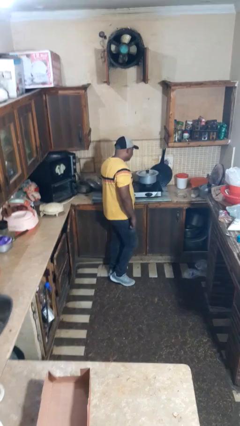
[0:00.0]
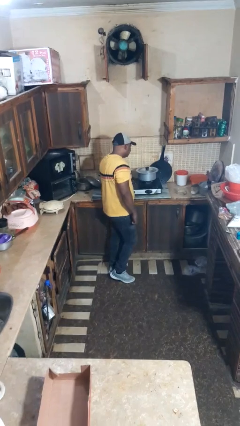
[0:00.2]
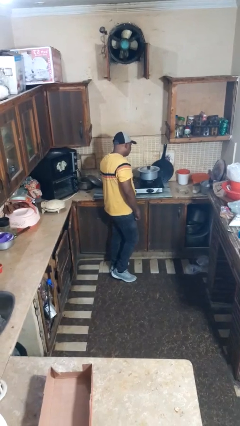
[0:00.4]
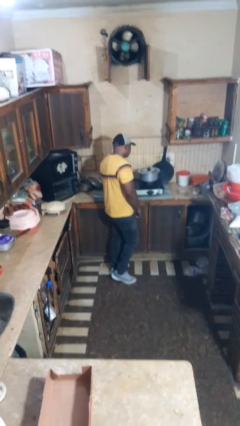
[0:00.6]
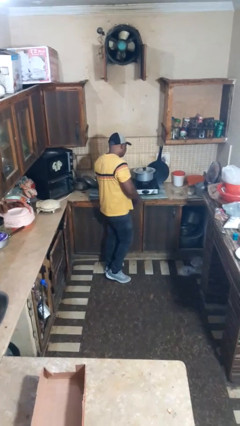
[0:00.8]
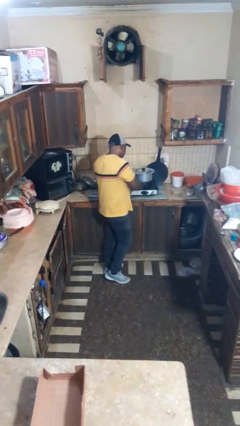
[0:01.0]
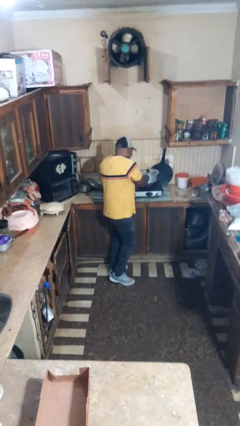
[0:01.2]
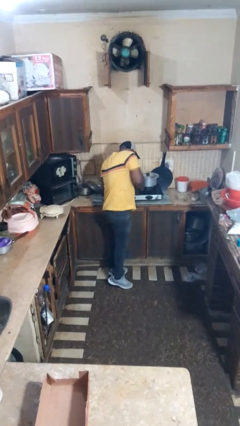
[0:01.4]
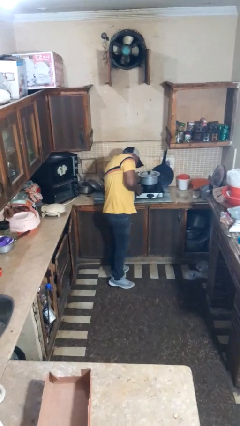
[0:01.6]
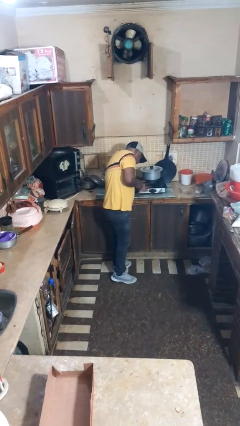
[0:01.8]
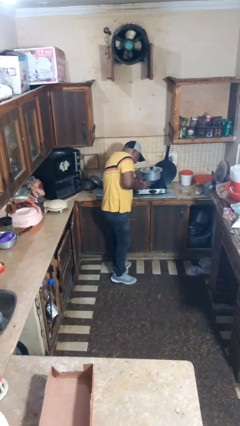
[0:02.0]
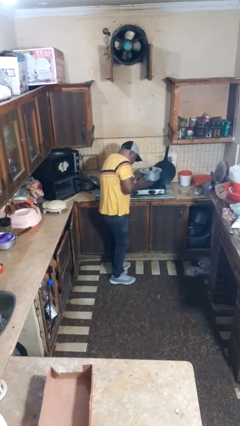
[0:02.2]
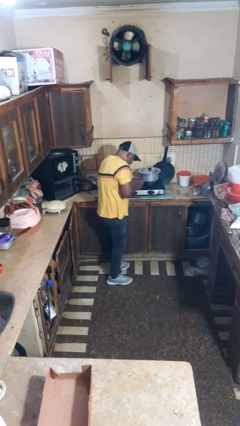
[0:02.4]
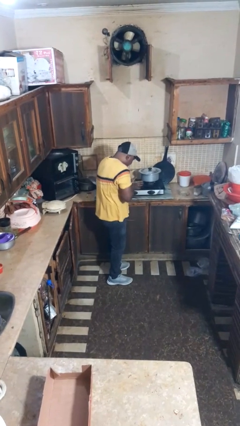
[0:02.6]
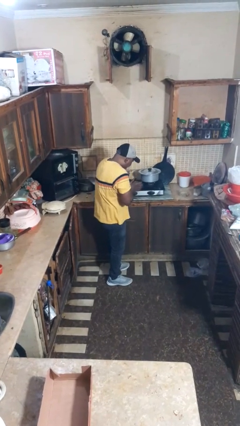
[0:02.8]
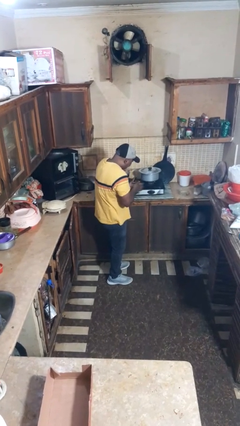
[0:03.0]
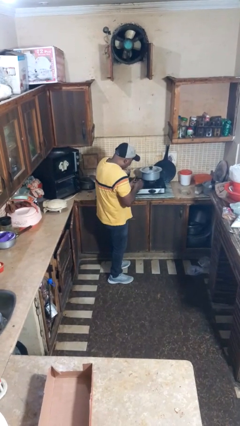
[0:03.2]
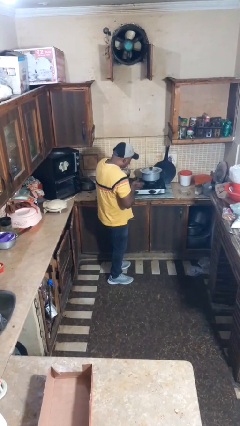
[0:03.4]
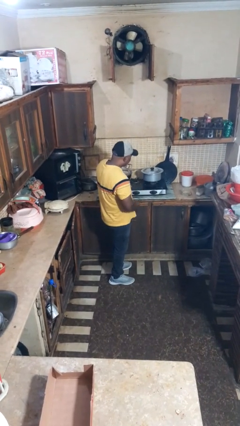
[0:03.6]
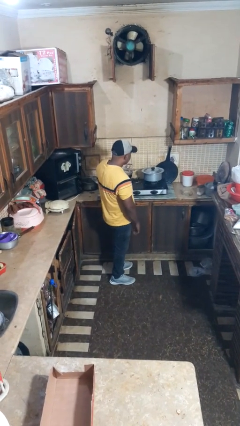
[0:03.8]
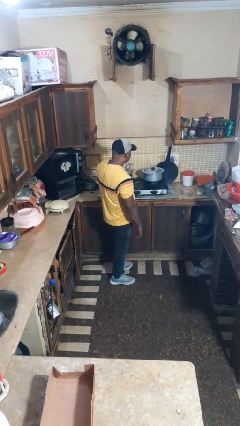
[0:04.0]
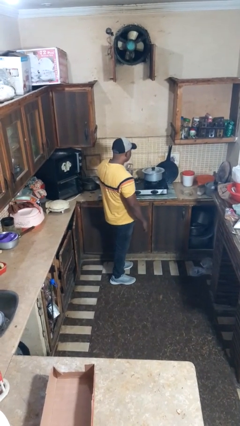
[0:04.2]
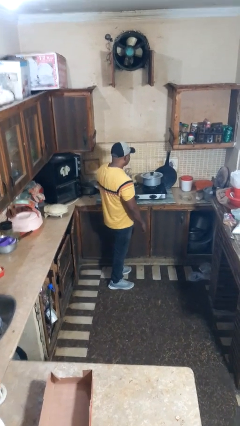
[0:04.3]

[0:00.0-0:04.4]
person burns hand

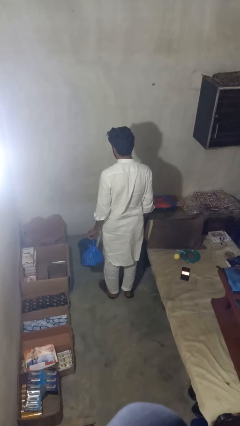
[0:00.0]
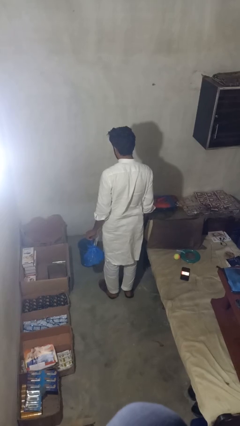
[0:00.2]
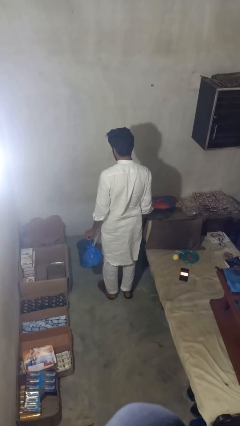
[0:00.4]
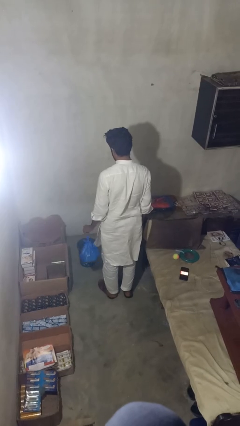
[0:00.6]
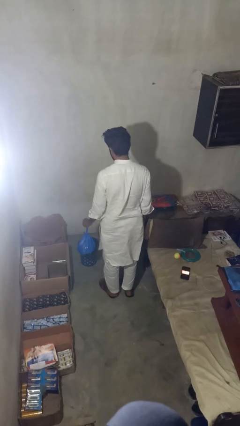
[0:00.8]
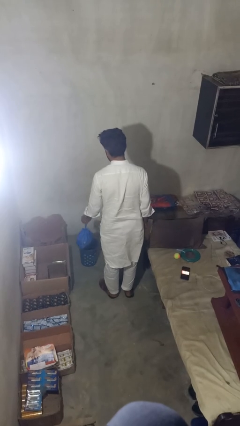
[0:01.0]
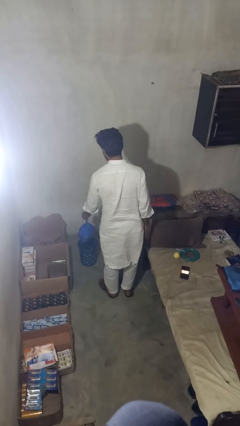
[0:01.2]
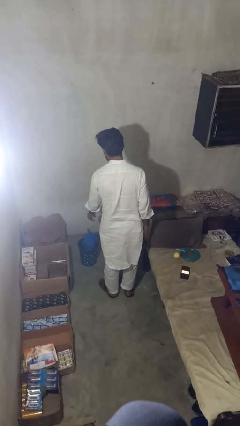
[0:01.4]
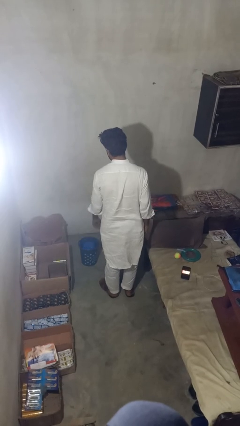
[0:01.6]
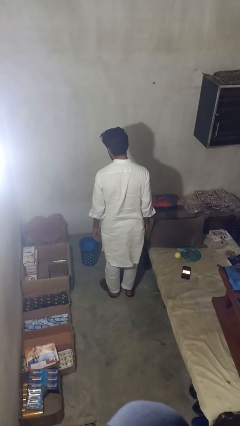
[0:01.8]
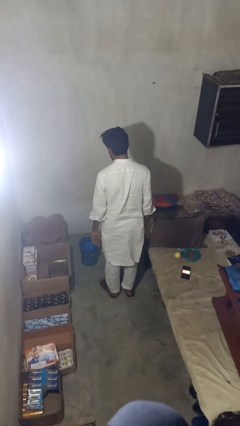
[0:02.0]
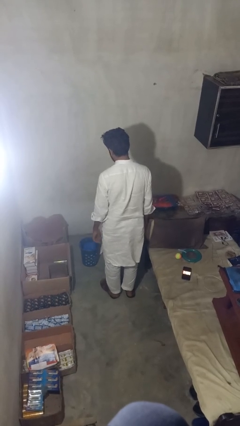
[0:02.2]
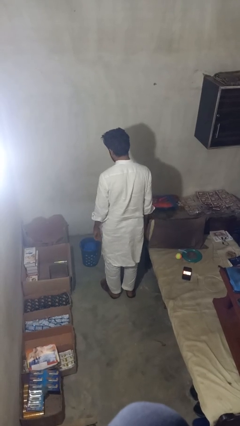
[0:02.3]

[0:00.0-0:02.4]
person puts object into basket

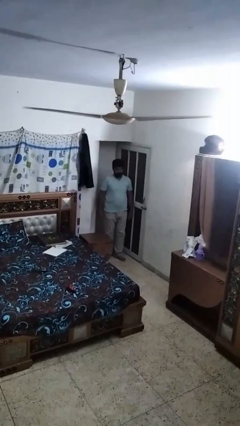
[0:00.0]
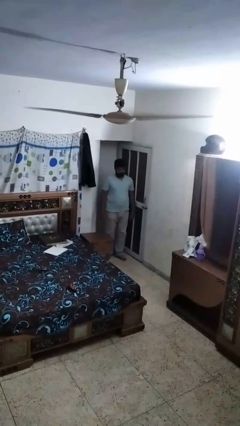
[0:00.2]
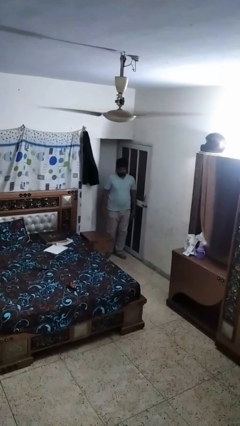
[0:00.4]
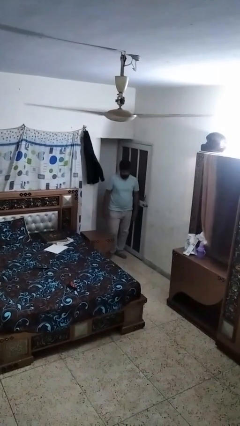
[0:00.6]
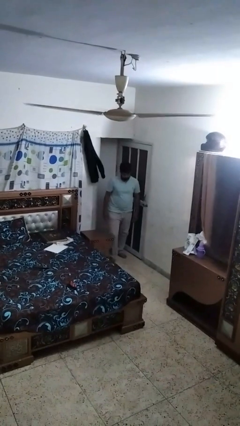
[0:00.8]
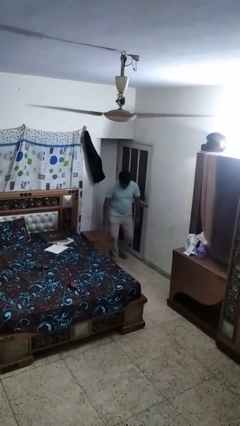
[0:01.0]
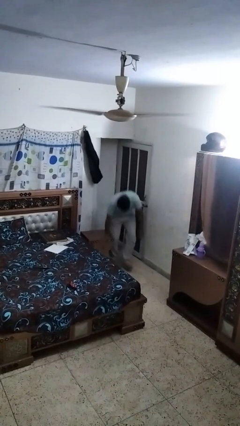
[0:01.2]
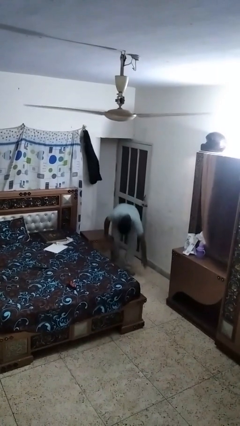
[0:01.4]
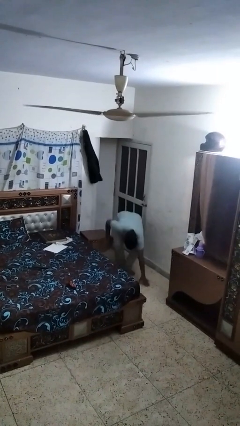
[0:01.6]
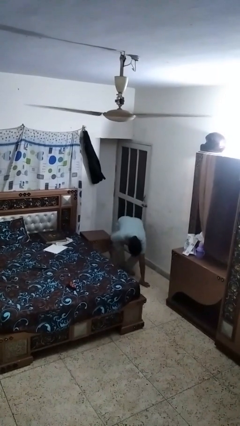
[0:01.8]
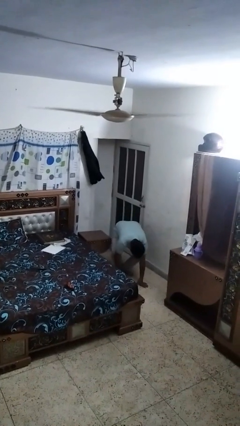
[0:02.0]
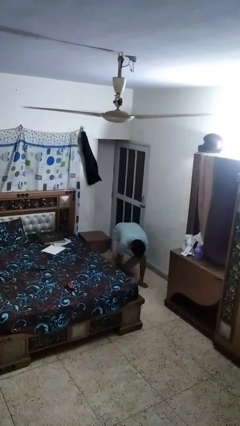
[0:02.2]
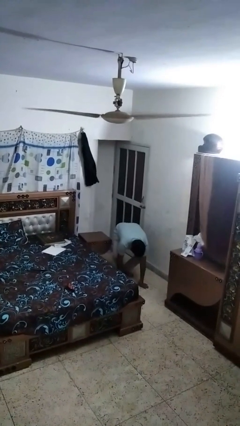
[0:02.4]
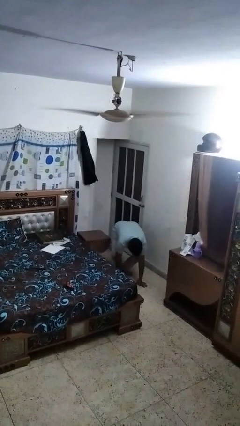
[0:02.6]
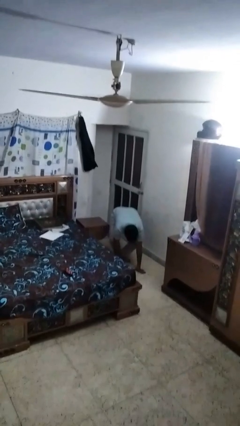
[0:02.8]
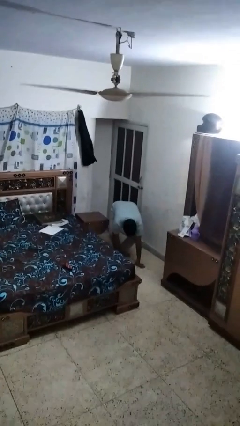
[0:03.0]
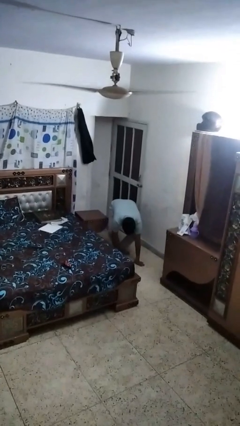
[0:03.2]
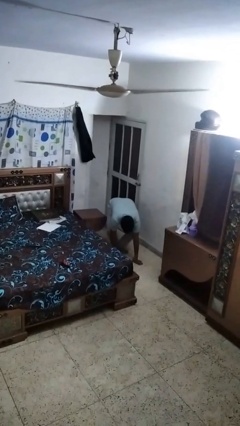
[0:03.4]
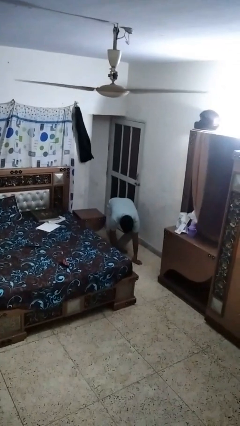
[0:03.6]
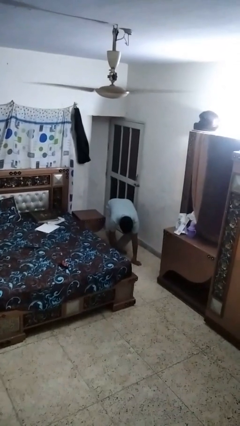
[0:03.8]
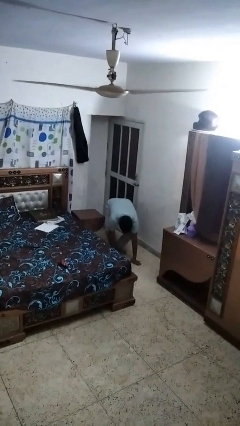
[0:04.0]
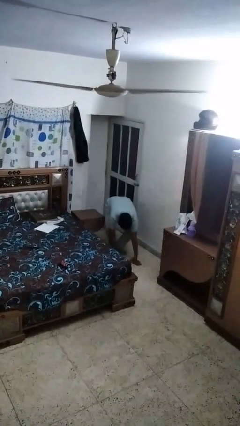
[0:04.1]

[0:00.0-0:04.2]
person trips on object on floor

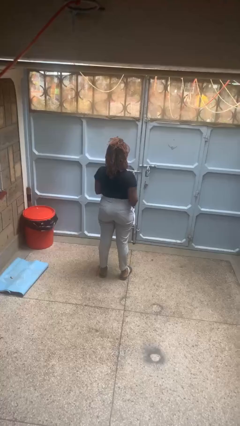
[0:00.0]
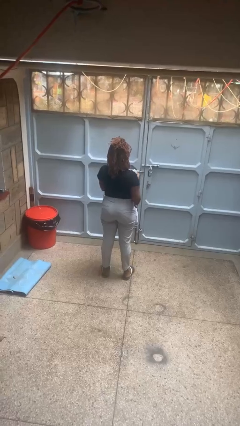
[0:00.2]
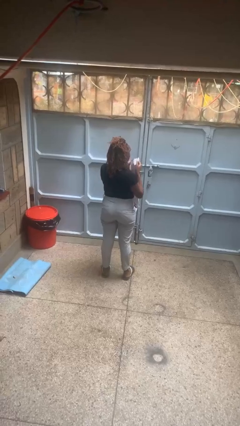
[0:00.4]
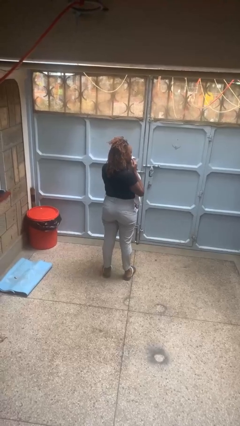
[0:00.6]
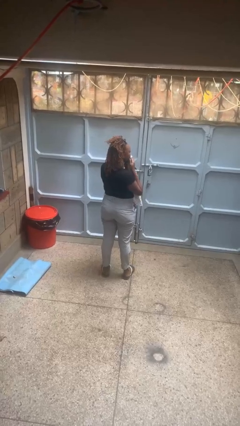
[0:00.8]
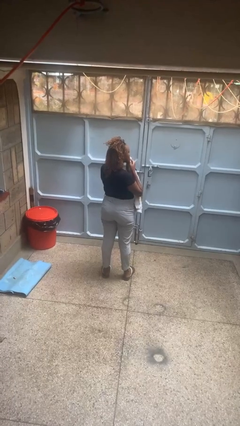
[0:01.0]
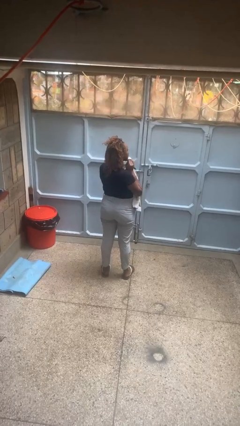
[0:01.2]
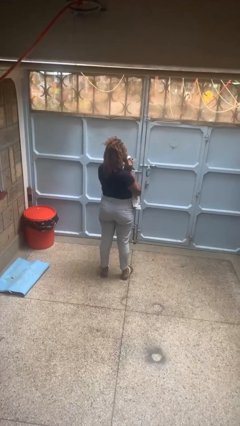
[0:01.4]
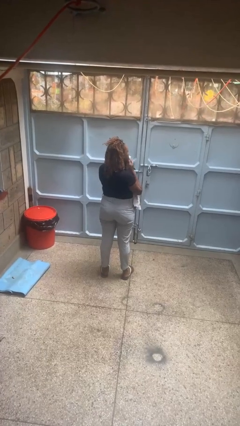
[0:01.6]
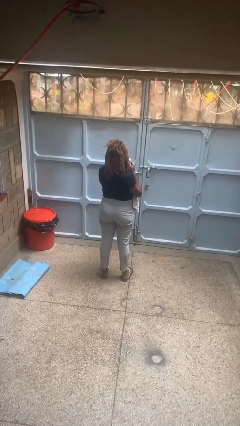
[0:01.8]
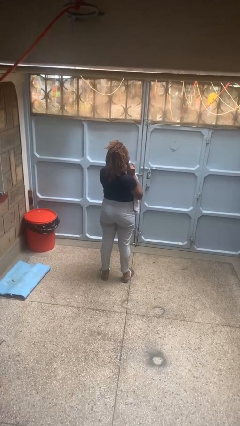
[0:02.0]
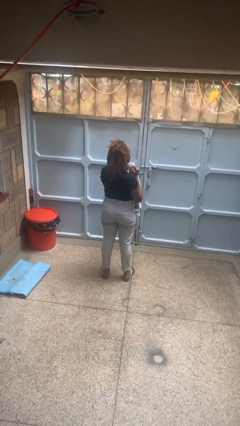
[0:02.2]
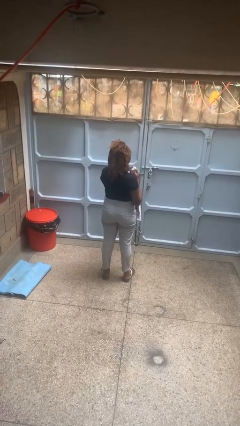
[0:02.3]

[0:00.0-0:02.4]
person wipes mouth with napkin

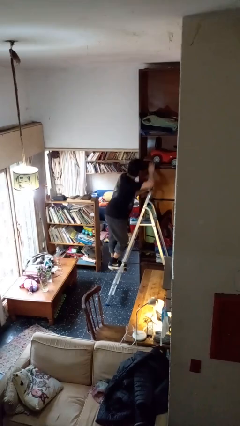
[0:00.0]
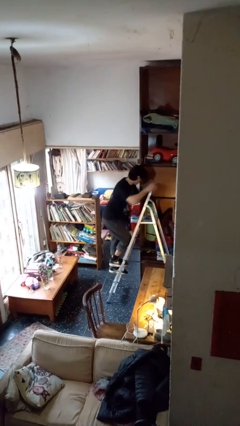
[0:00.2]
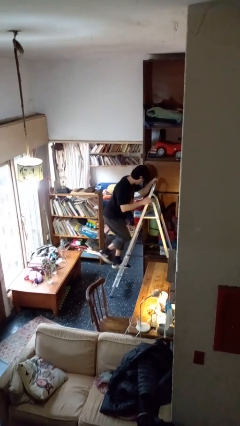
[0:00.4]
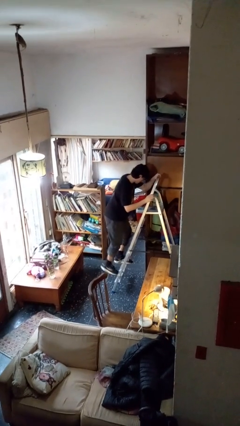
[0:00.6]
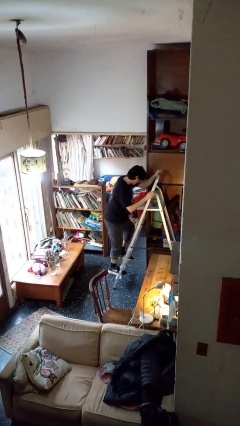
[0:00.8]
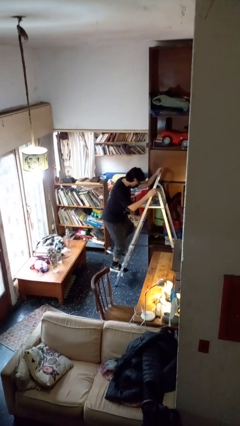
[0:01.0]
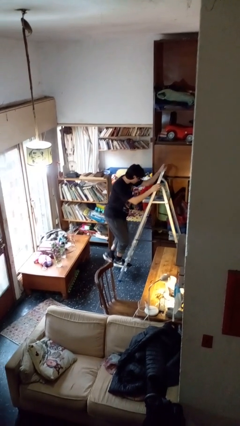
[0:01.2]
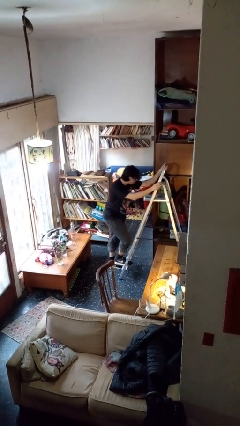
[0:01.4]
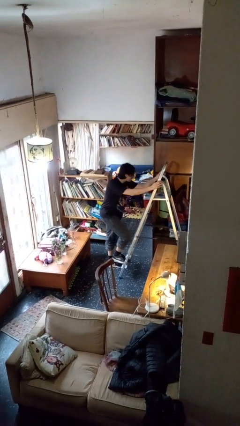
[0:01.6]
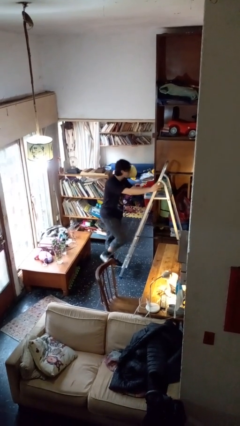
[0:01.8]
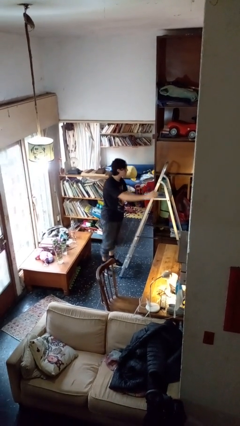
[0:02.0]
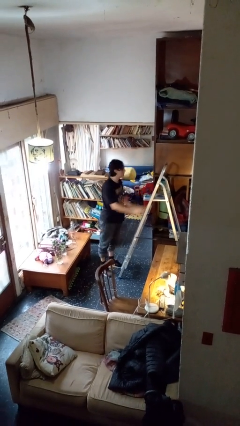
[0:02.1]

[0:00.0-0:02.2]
person climbs down ladder

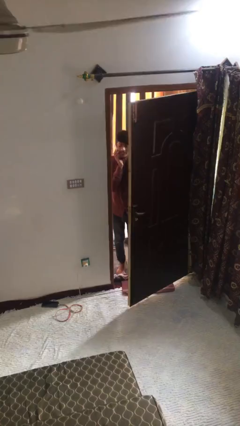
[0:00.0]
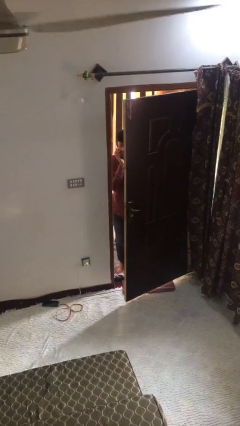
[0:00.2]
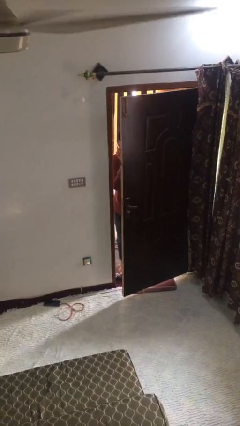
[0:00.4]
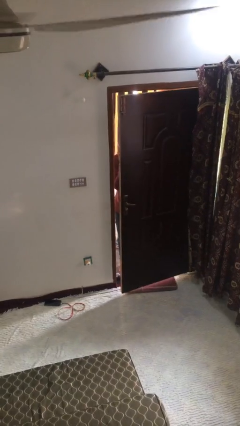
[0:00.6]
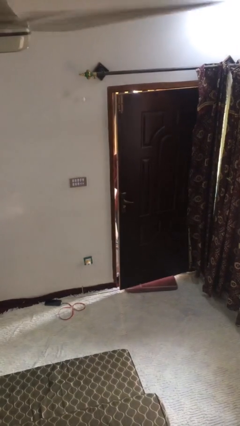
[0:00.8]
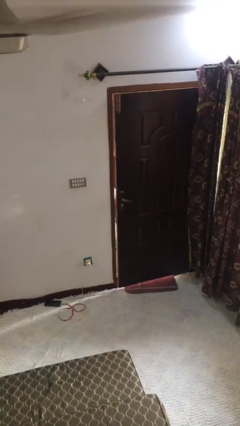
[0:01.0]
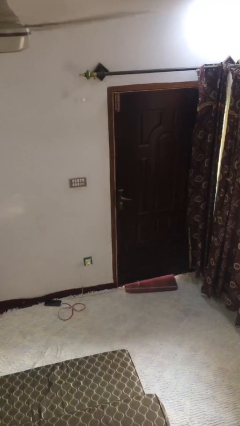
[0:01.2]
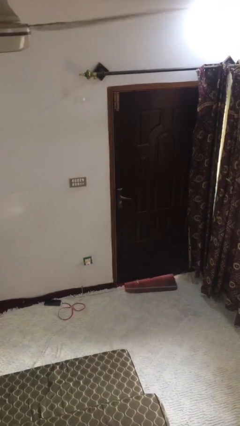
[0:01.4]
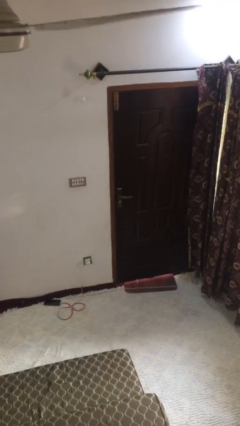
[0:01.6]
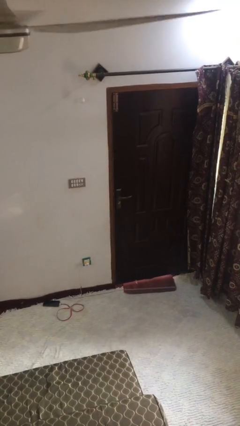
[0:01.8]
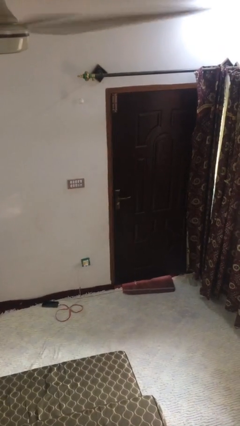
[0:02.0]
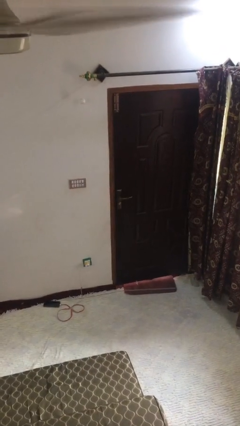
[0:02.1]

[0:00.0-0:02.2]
person closes facility door
